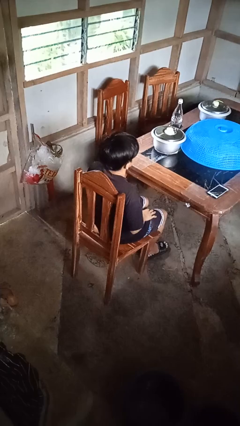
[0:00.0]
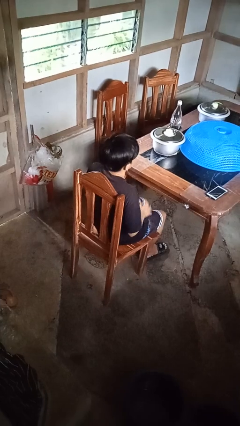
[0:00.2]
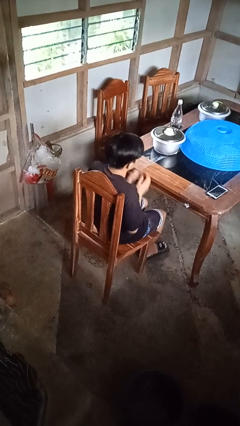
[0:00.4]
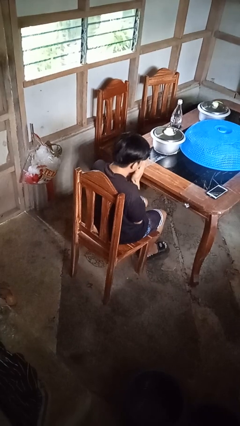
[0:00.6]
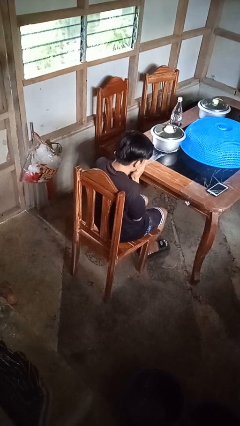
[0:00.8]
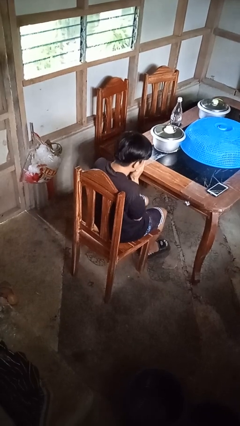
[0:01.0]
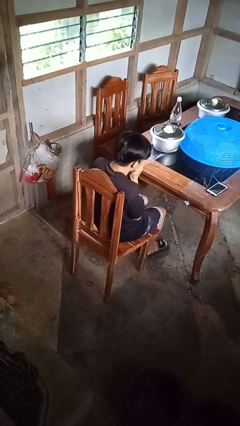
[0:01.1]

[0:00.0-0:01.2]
person sneezes into hand

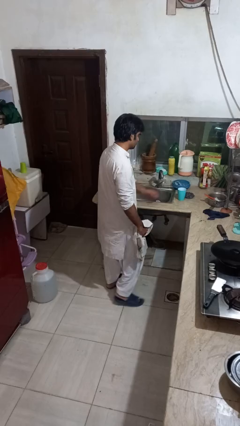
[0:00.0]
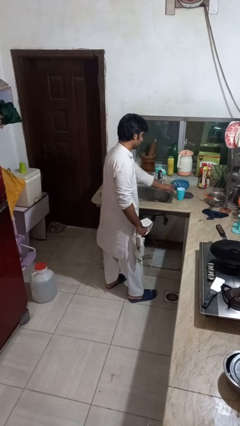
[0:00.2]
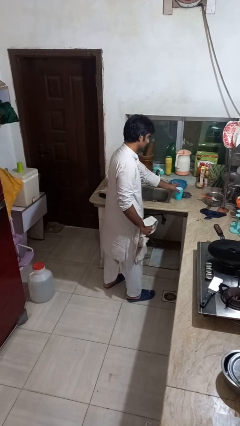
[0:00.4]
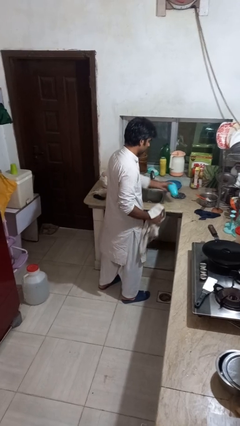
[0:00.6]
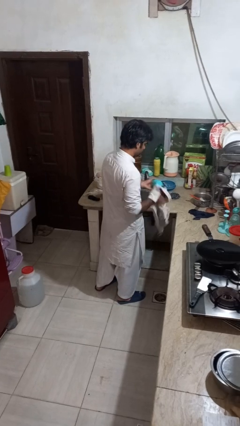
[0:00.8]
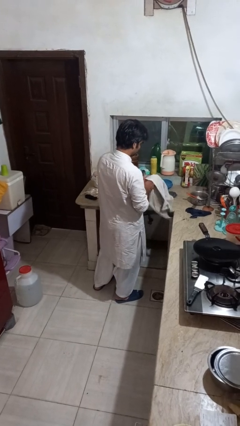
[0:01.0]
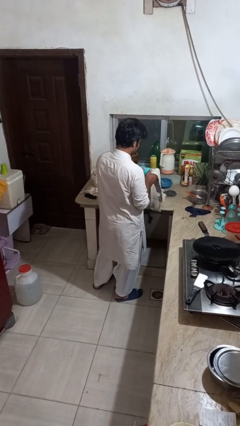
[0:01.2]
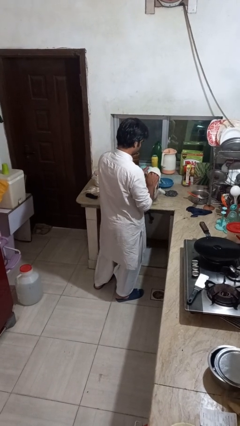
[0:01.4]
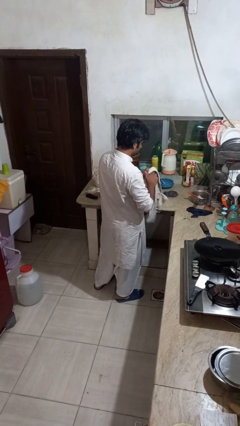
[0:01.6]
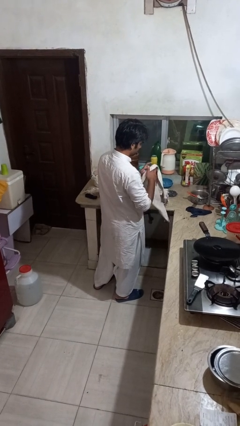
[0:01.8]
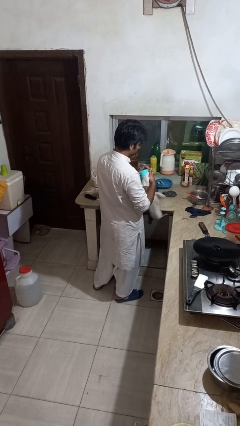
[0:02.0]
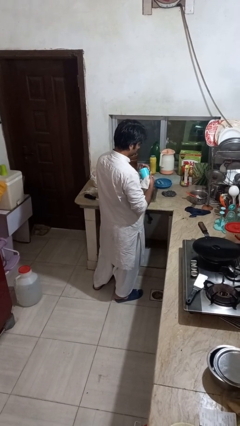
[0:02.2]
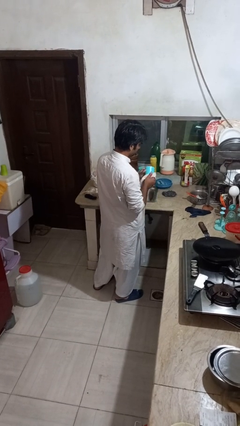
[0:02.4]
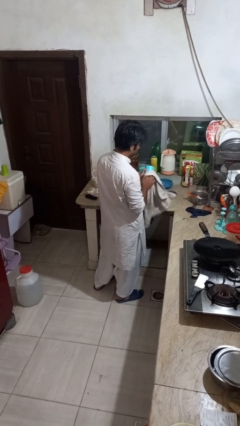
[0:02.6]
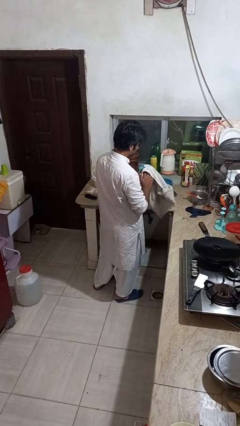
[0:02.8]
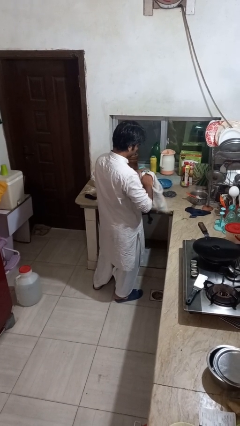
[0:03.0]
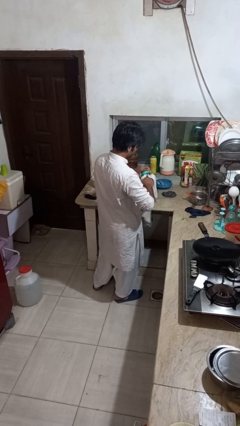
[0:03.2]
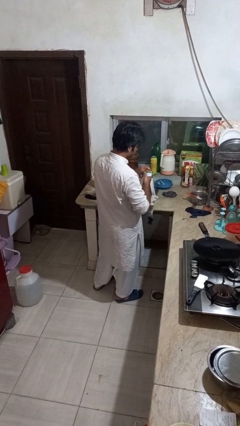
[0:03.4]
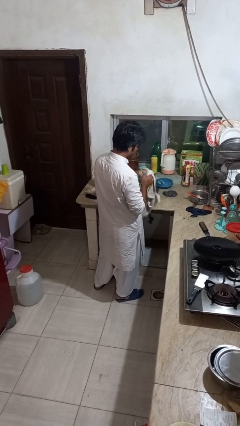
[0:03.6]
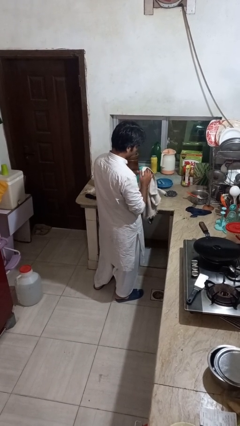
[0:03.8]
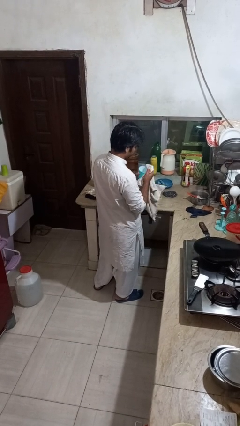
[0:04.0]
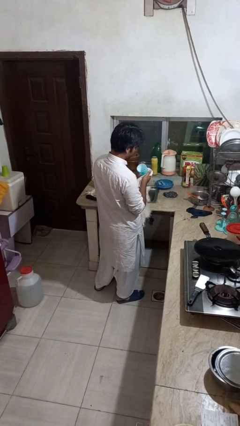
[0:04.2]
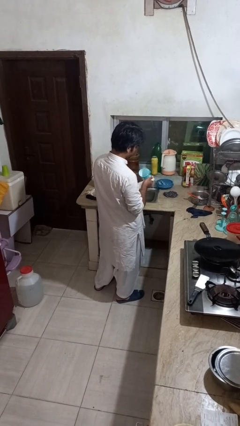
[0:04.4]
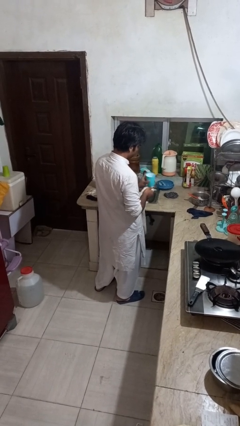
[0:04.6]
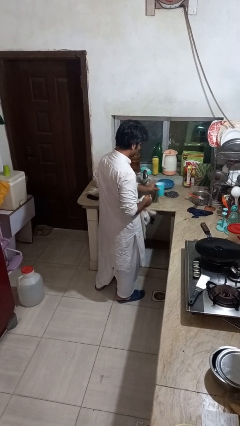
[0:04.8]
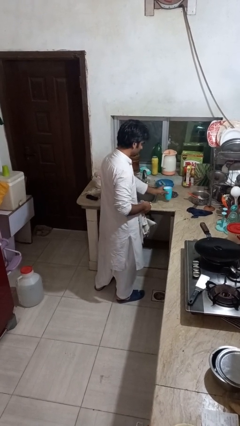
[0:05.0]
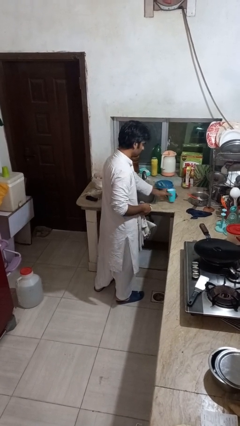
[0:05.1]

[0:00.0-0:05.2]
person dries dish

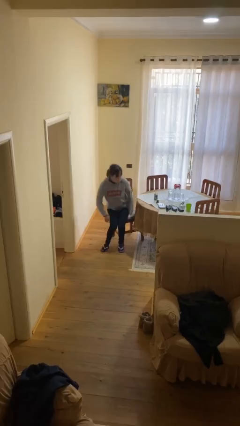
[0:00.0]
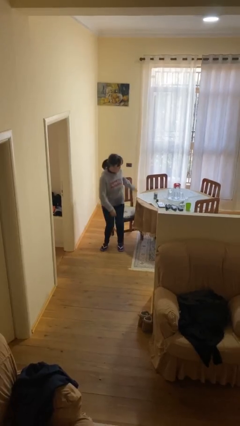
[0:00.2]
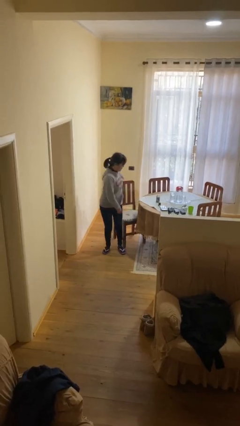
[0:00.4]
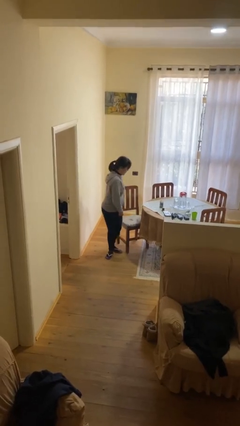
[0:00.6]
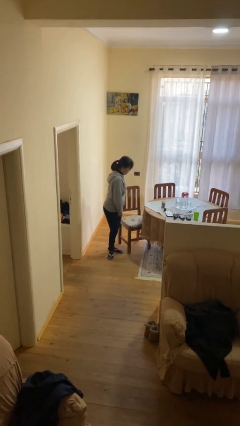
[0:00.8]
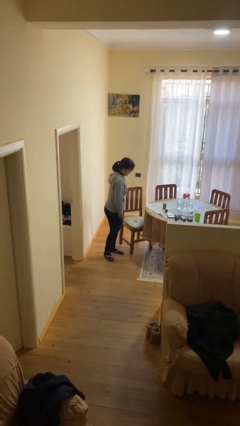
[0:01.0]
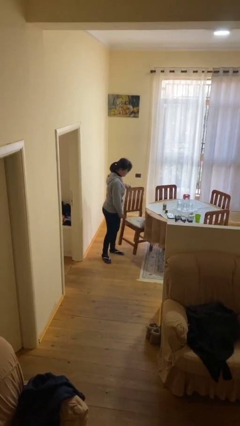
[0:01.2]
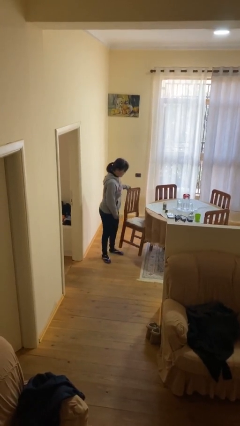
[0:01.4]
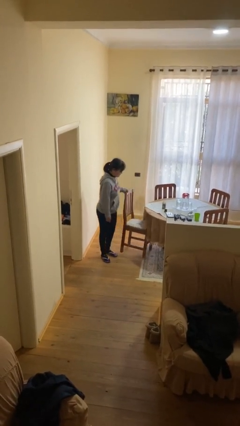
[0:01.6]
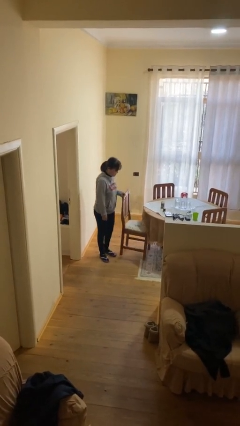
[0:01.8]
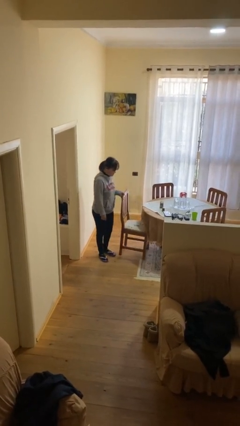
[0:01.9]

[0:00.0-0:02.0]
person stands up

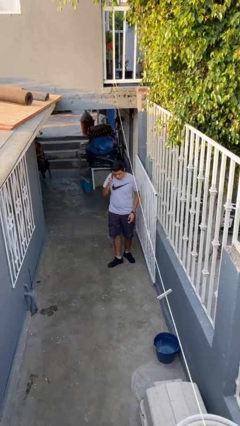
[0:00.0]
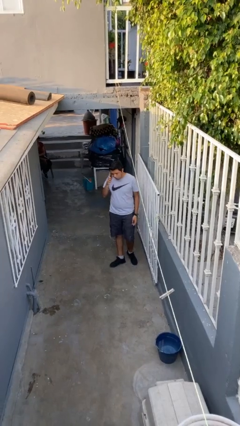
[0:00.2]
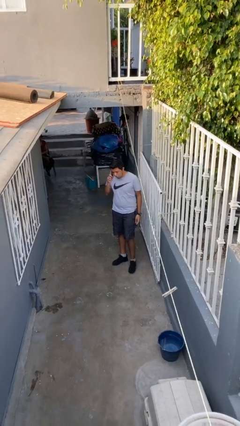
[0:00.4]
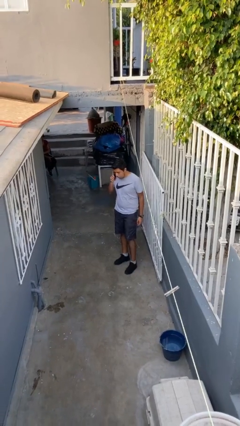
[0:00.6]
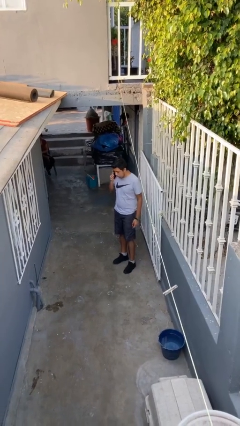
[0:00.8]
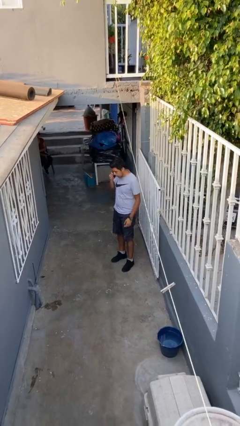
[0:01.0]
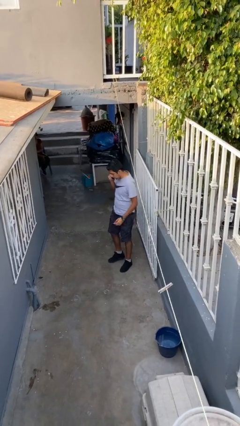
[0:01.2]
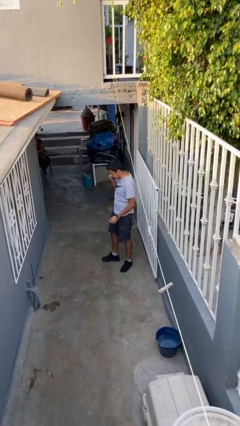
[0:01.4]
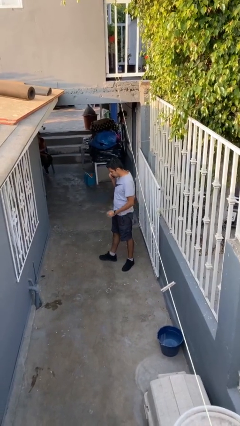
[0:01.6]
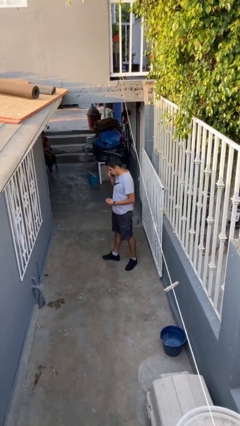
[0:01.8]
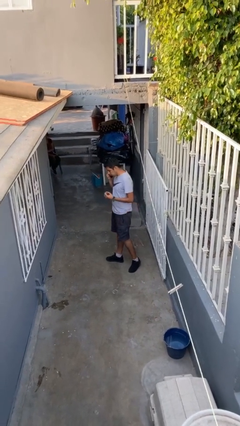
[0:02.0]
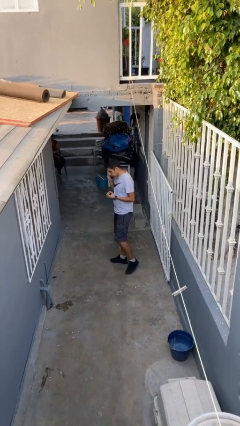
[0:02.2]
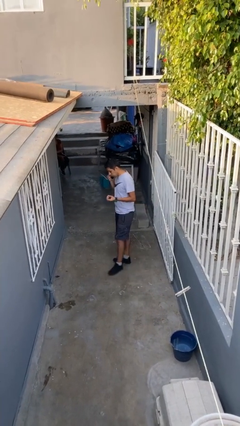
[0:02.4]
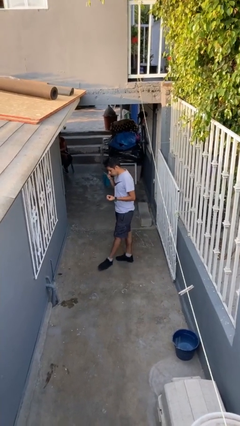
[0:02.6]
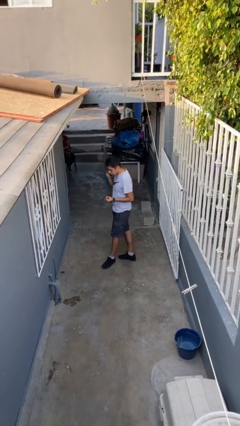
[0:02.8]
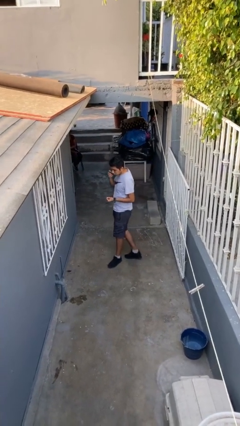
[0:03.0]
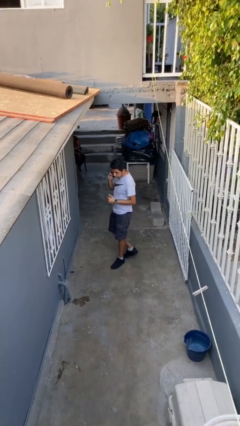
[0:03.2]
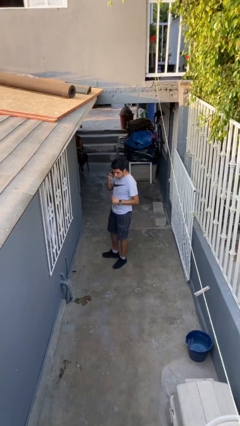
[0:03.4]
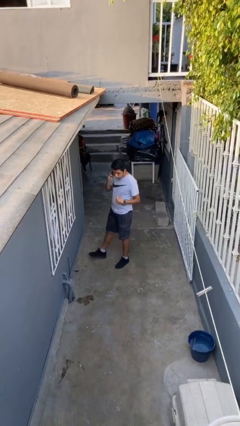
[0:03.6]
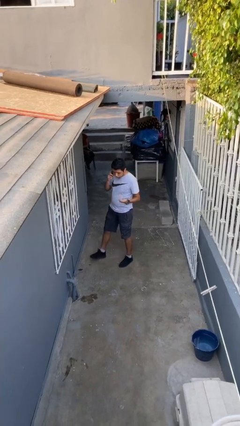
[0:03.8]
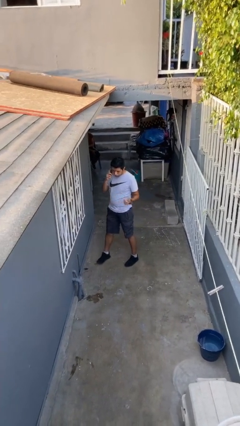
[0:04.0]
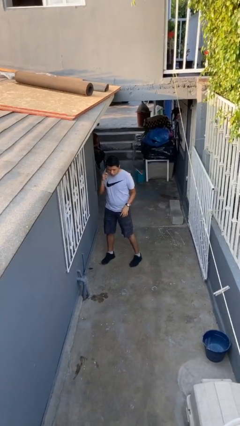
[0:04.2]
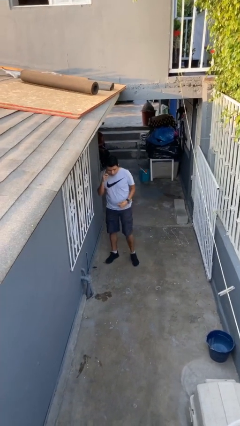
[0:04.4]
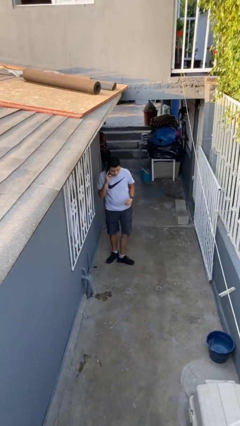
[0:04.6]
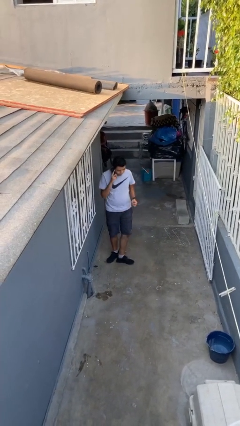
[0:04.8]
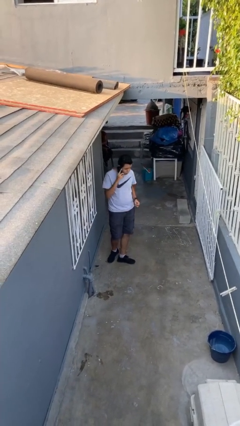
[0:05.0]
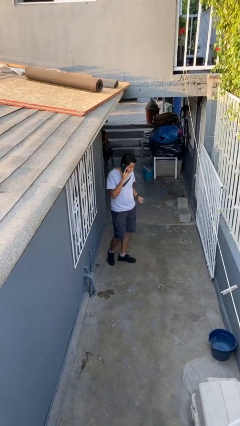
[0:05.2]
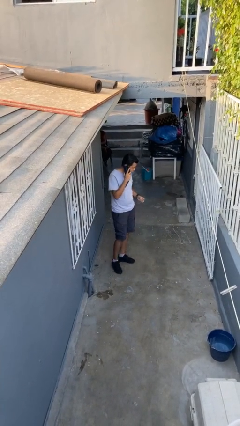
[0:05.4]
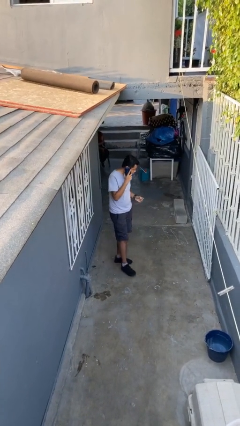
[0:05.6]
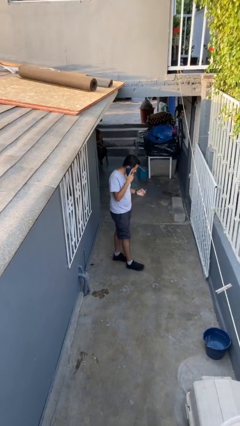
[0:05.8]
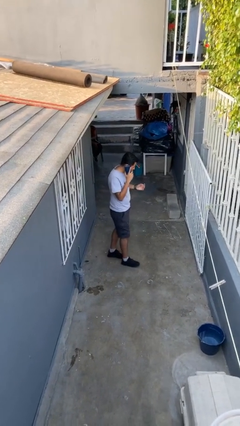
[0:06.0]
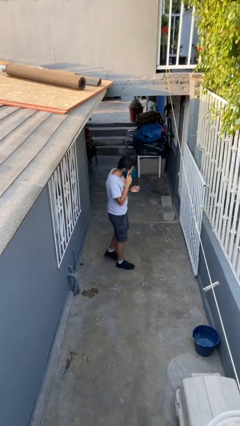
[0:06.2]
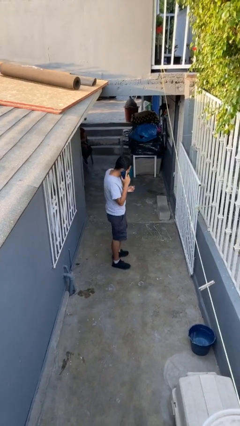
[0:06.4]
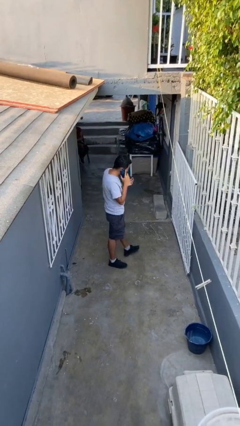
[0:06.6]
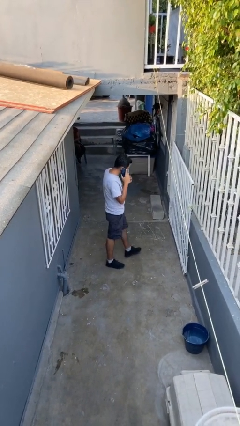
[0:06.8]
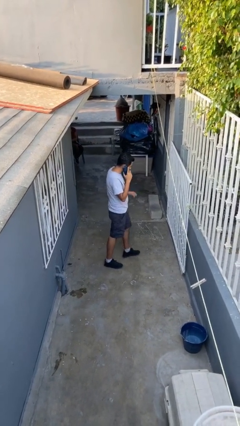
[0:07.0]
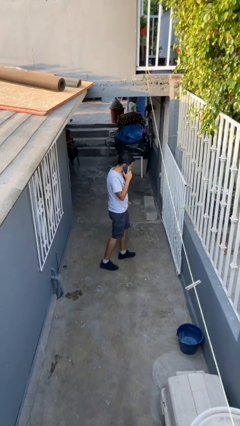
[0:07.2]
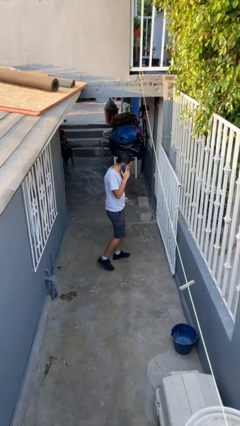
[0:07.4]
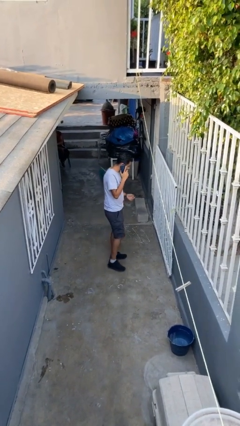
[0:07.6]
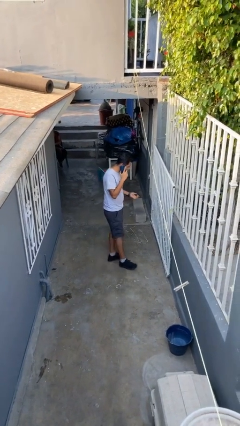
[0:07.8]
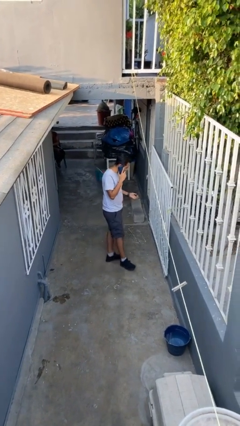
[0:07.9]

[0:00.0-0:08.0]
person talks on phone

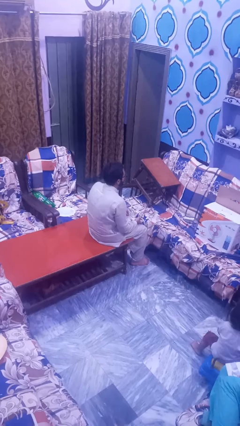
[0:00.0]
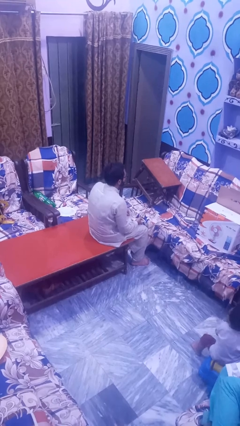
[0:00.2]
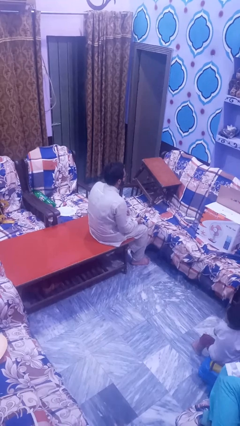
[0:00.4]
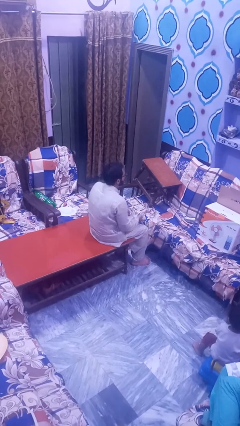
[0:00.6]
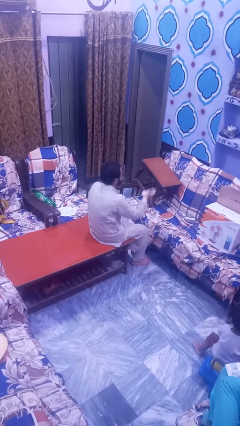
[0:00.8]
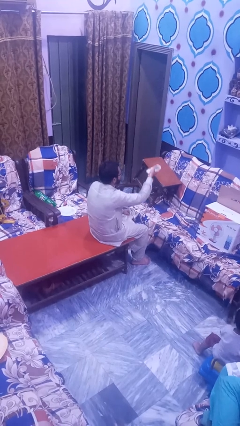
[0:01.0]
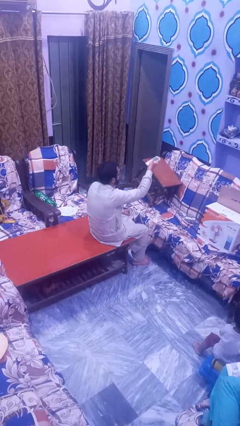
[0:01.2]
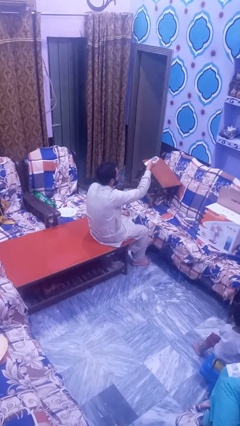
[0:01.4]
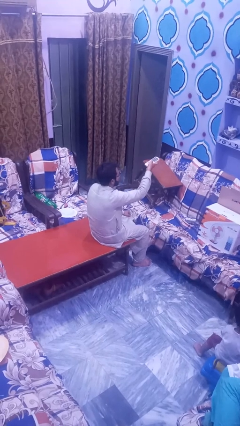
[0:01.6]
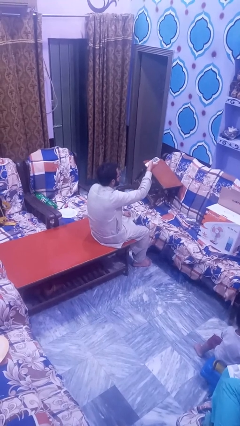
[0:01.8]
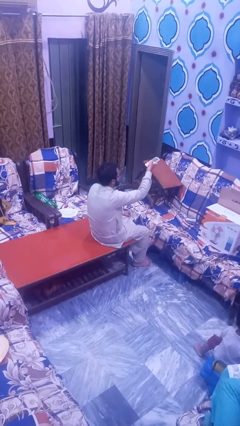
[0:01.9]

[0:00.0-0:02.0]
person uses television remote
